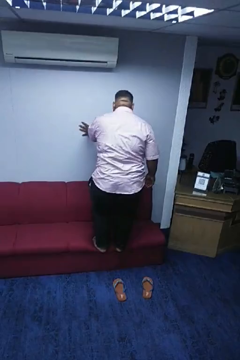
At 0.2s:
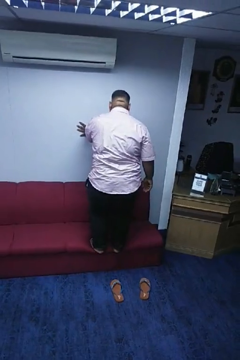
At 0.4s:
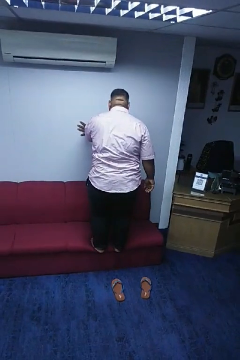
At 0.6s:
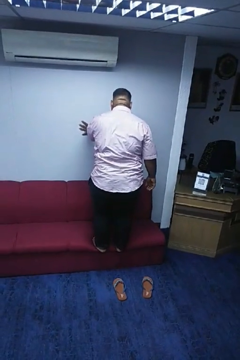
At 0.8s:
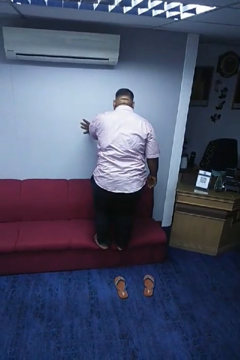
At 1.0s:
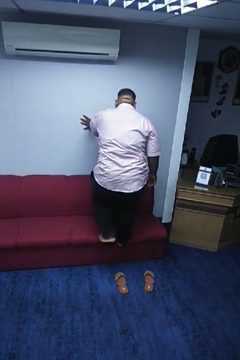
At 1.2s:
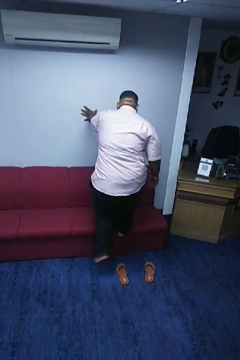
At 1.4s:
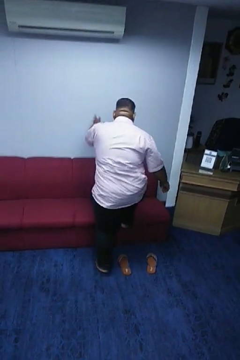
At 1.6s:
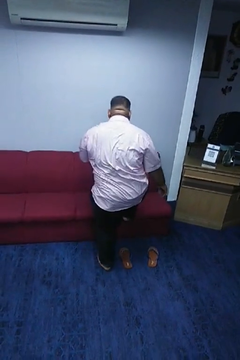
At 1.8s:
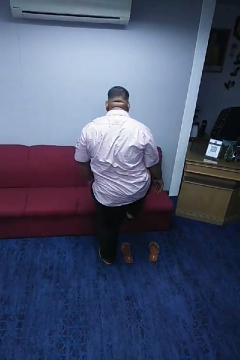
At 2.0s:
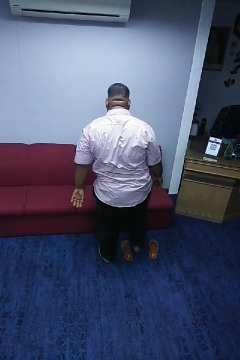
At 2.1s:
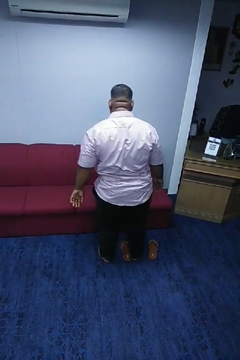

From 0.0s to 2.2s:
person climbs off couch

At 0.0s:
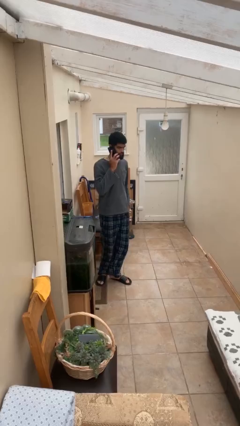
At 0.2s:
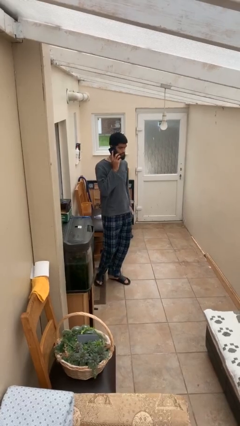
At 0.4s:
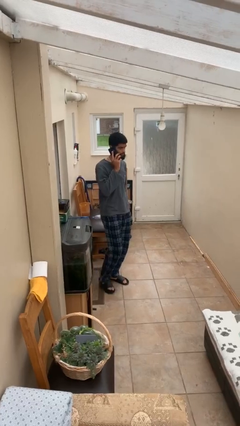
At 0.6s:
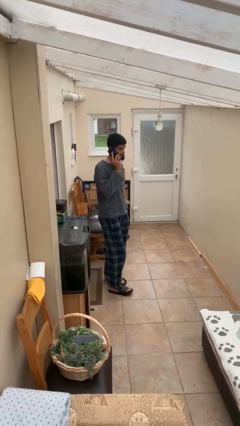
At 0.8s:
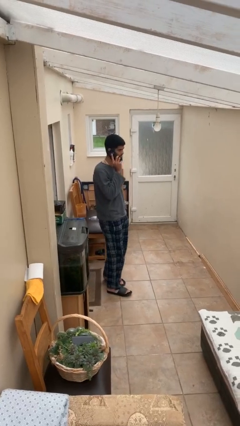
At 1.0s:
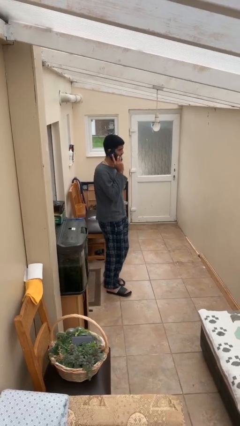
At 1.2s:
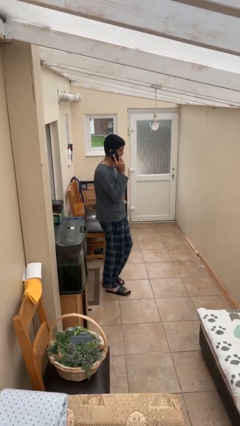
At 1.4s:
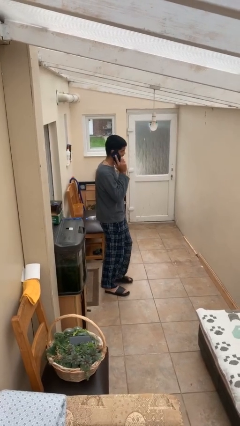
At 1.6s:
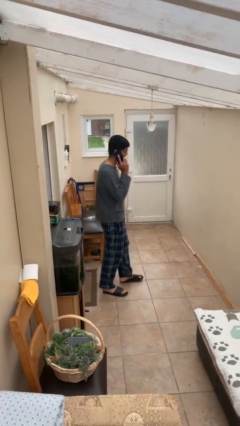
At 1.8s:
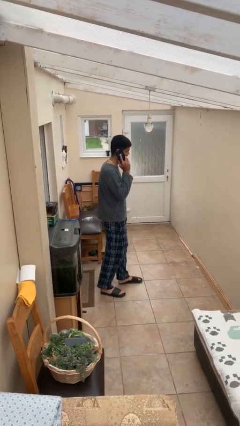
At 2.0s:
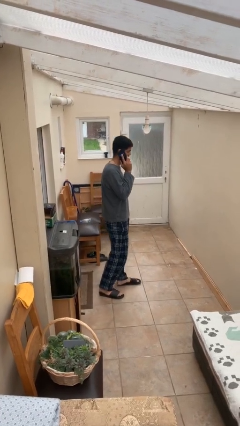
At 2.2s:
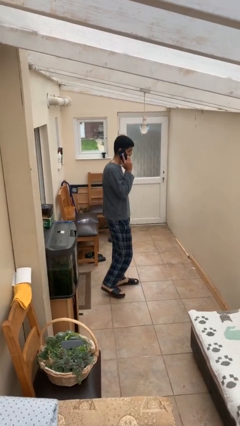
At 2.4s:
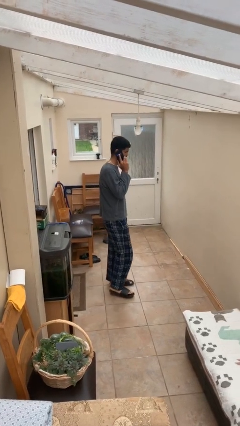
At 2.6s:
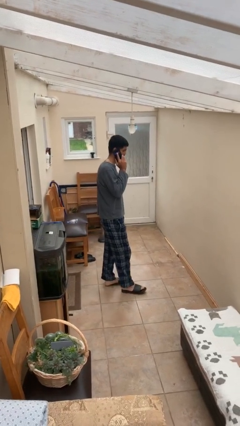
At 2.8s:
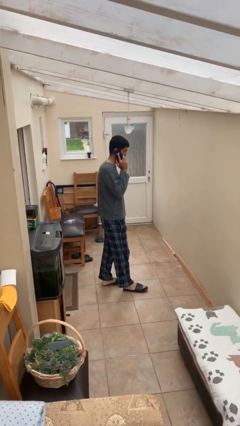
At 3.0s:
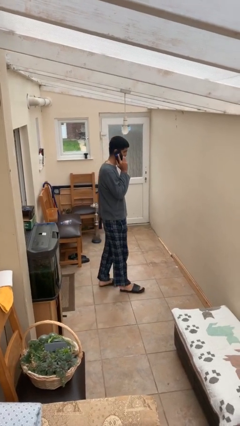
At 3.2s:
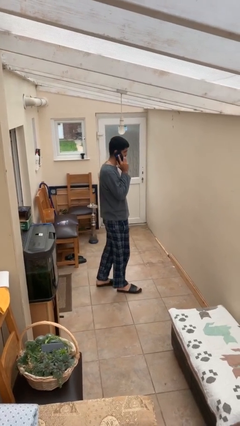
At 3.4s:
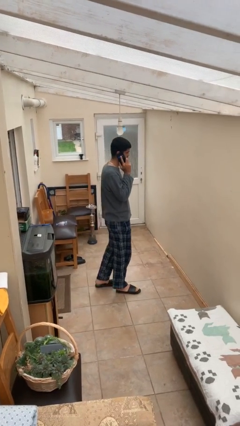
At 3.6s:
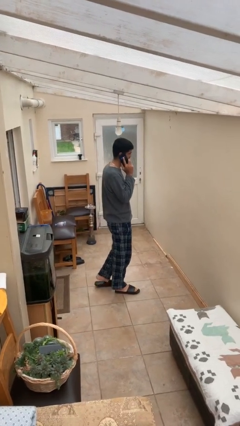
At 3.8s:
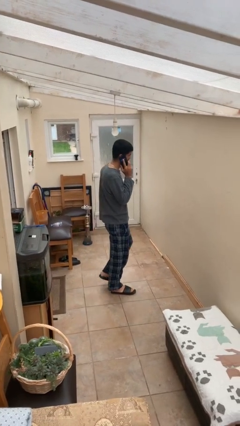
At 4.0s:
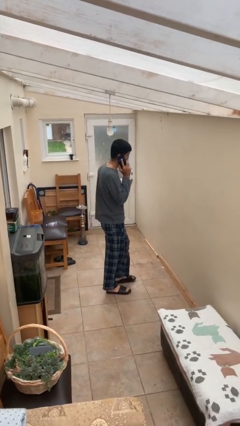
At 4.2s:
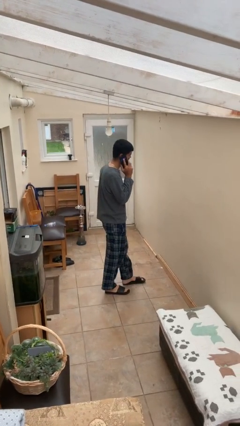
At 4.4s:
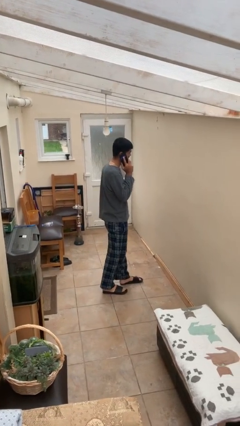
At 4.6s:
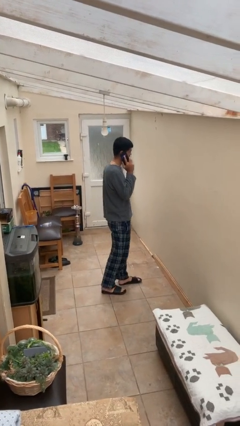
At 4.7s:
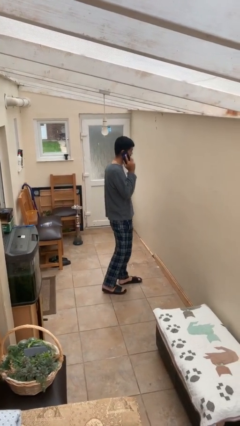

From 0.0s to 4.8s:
person talks on phone

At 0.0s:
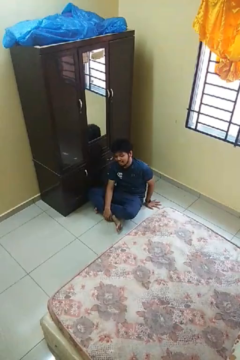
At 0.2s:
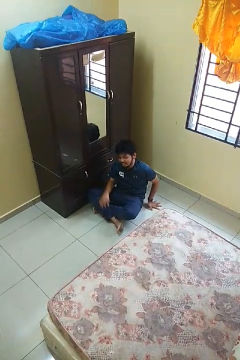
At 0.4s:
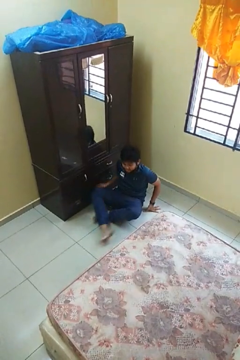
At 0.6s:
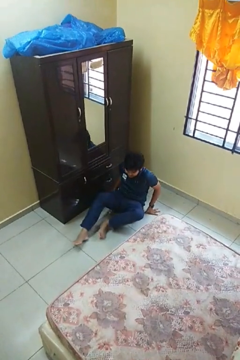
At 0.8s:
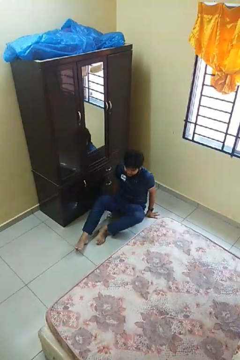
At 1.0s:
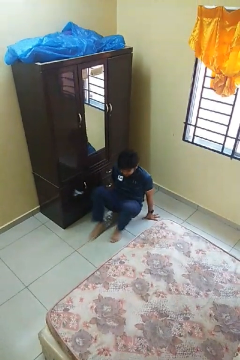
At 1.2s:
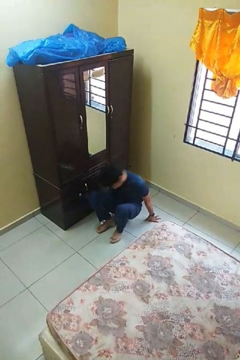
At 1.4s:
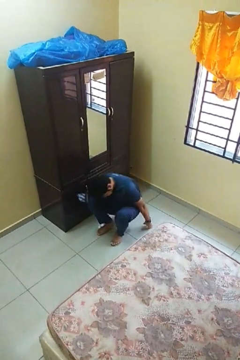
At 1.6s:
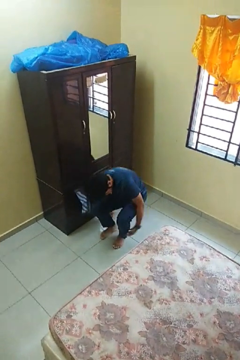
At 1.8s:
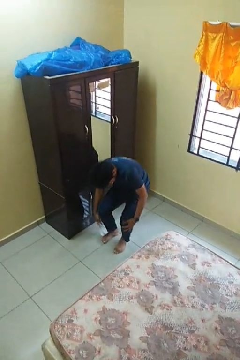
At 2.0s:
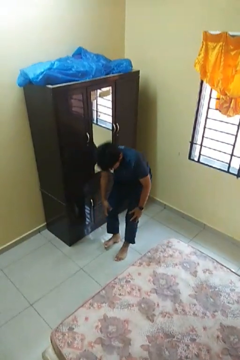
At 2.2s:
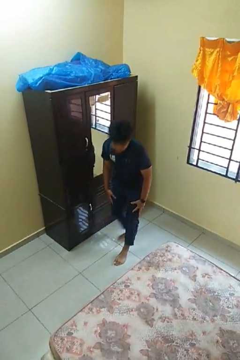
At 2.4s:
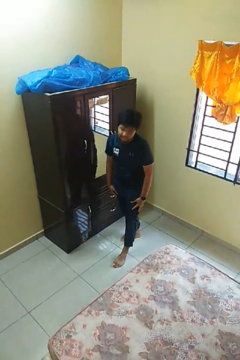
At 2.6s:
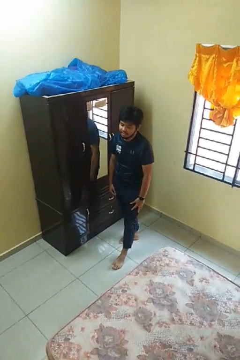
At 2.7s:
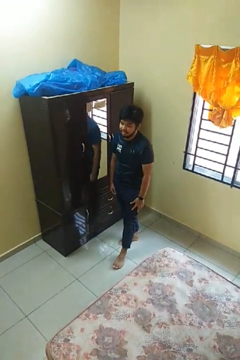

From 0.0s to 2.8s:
person stands up from floor

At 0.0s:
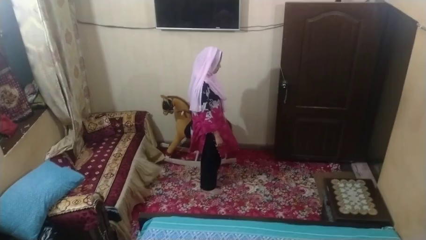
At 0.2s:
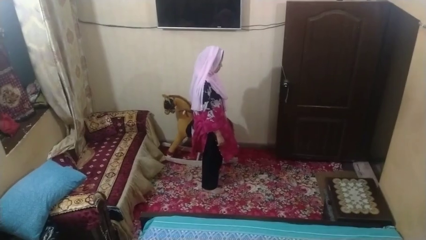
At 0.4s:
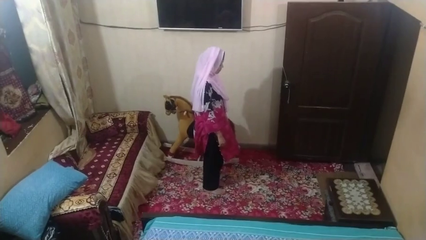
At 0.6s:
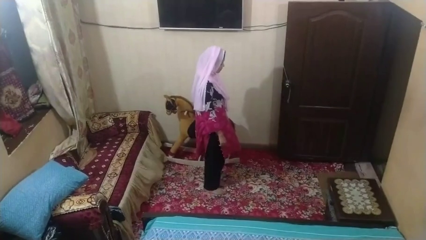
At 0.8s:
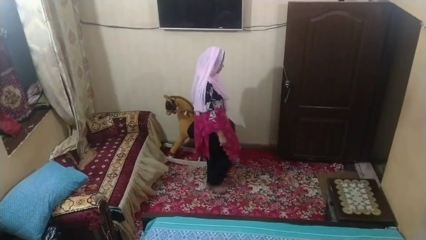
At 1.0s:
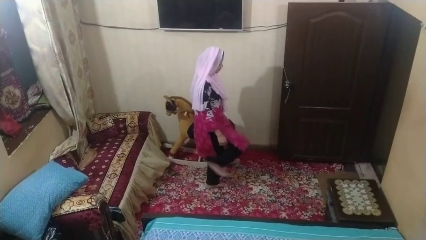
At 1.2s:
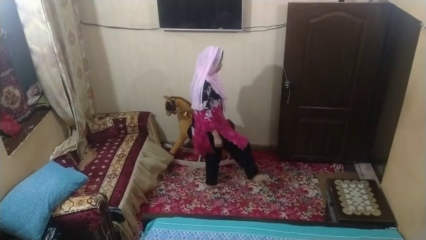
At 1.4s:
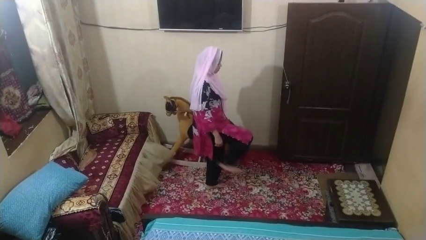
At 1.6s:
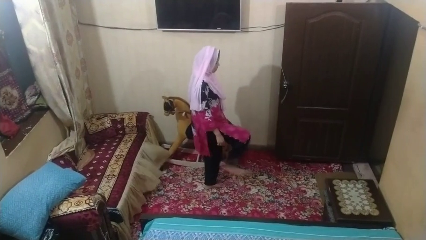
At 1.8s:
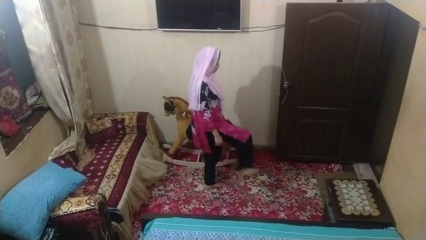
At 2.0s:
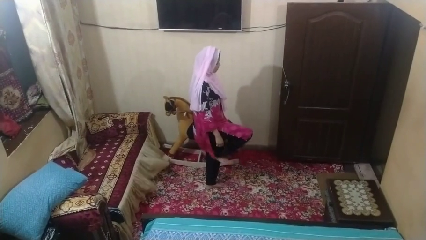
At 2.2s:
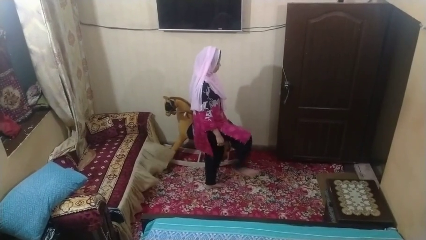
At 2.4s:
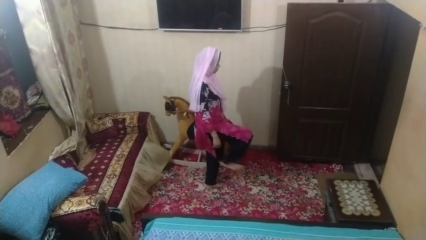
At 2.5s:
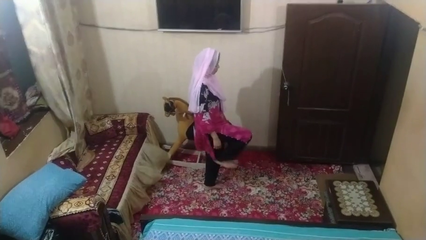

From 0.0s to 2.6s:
person karate kicks

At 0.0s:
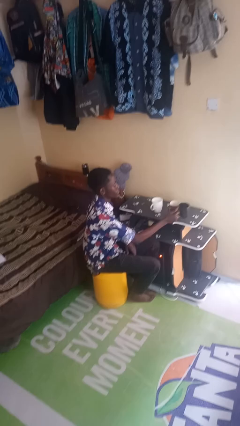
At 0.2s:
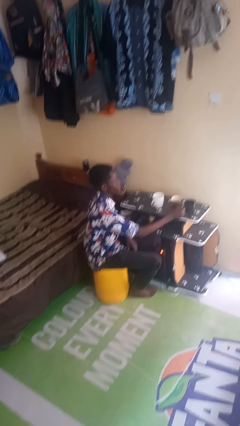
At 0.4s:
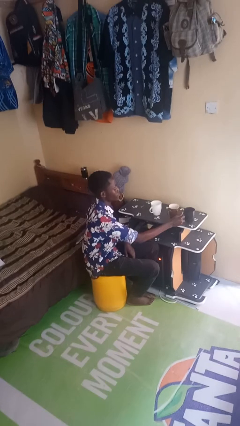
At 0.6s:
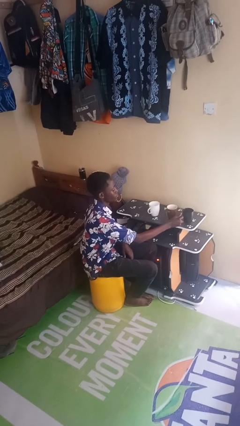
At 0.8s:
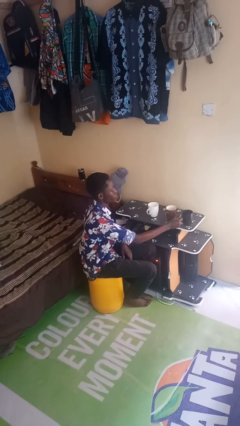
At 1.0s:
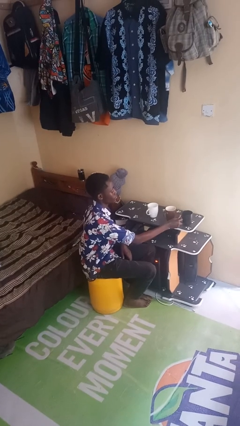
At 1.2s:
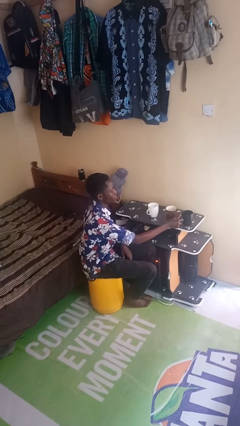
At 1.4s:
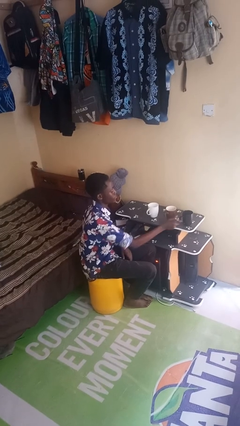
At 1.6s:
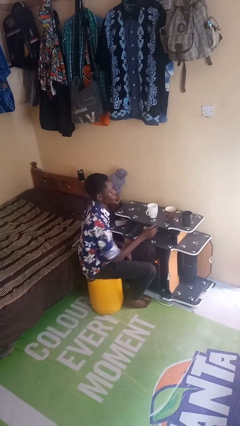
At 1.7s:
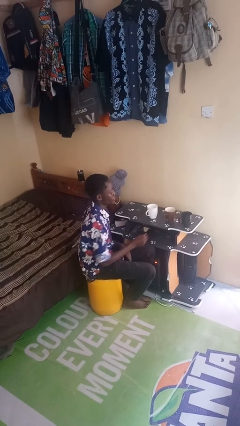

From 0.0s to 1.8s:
person puts down object on table

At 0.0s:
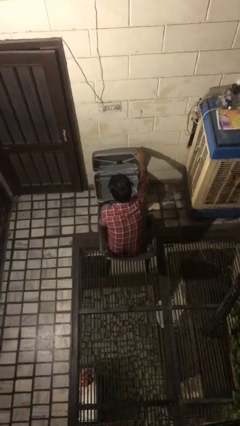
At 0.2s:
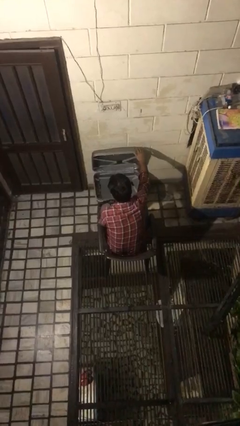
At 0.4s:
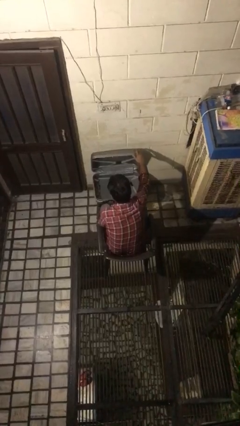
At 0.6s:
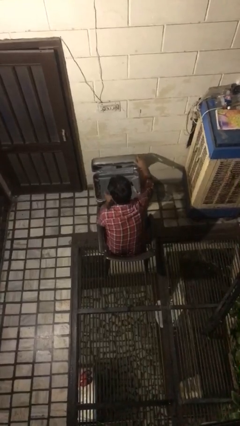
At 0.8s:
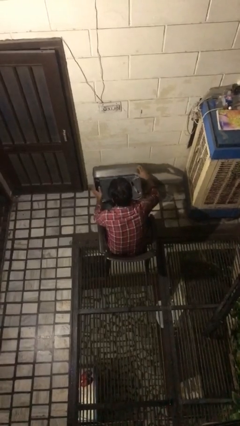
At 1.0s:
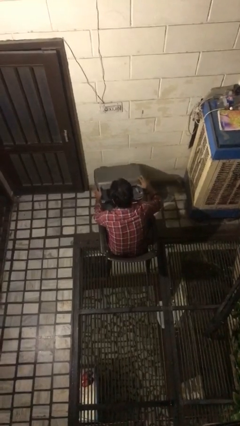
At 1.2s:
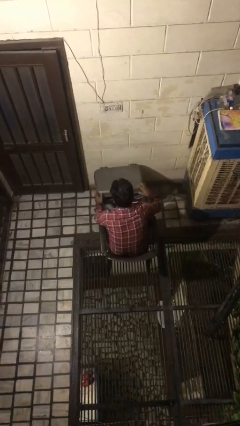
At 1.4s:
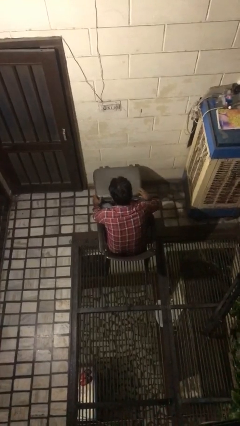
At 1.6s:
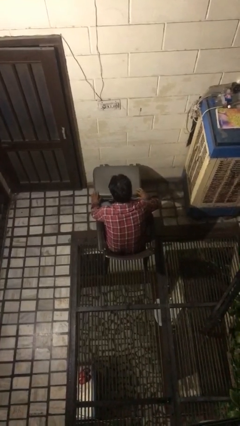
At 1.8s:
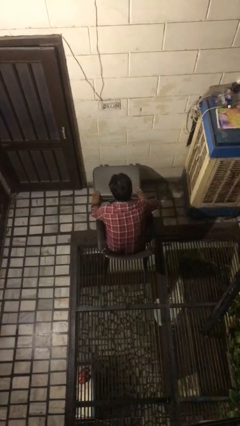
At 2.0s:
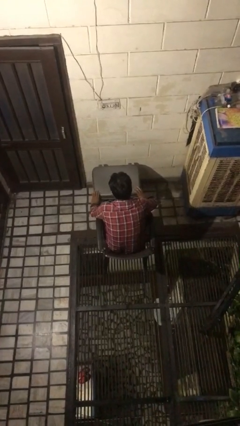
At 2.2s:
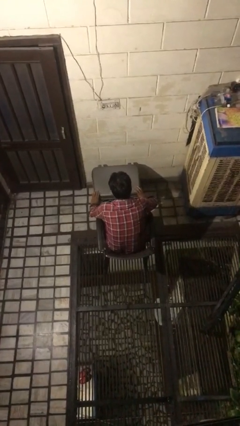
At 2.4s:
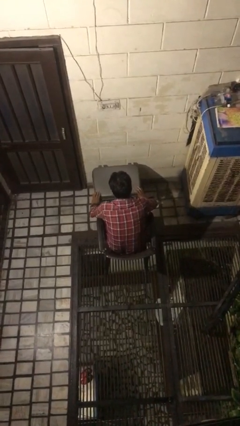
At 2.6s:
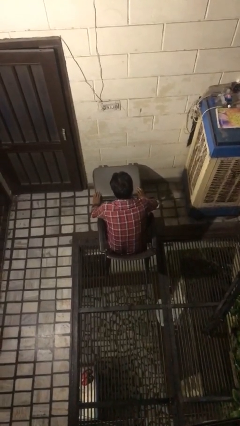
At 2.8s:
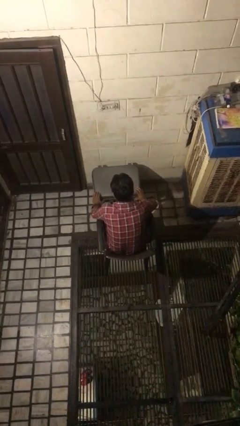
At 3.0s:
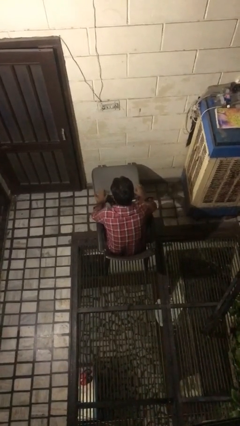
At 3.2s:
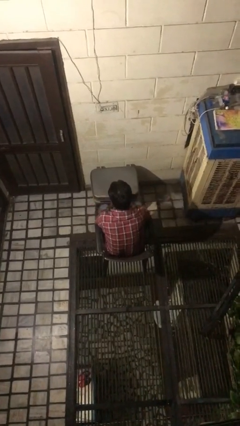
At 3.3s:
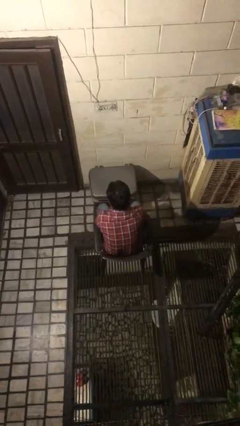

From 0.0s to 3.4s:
person closes suitcase

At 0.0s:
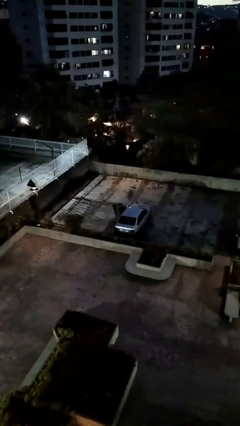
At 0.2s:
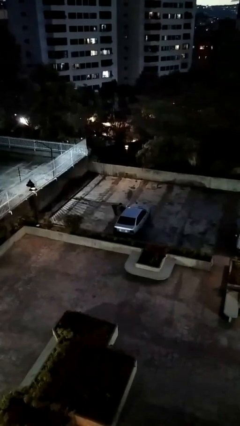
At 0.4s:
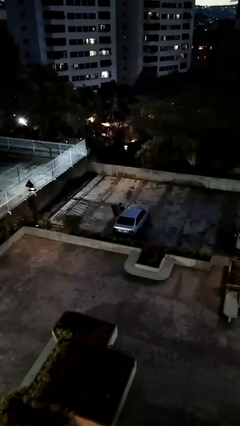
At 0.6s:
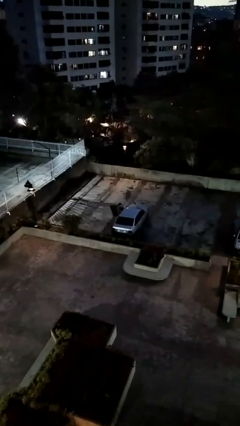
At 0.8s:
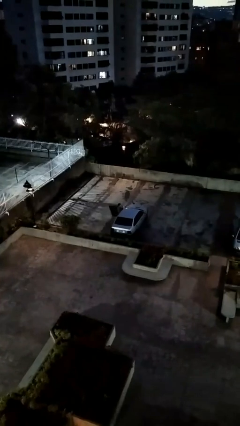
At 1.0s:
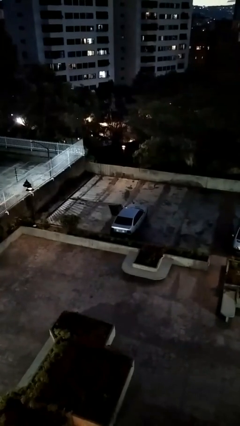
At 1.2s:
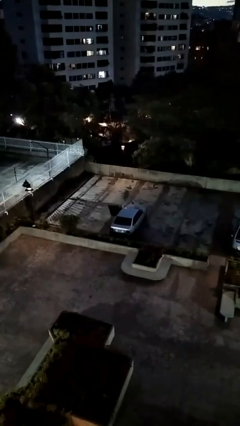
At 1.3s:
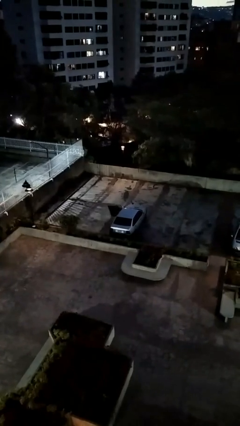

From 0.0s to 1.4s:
person enters car
